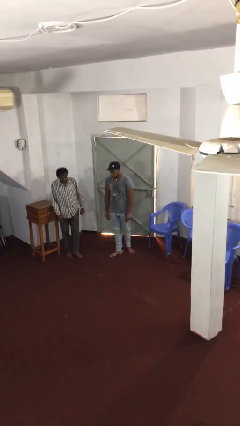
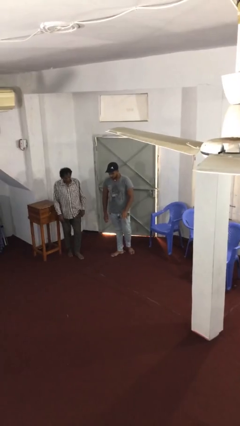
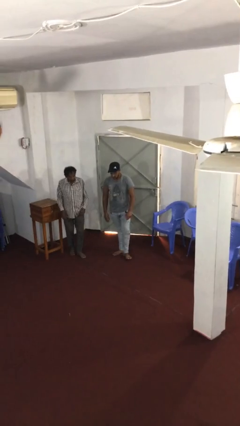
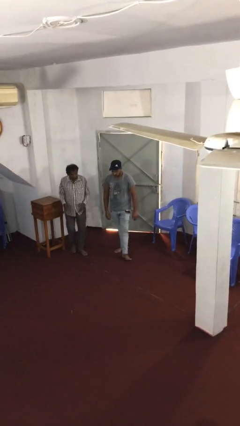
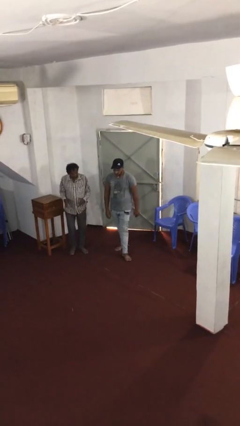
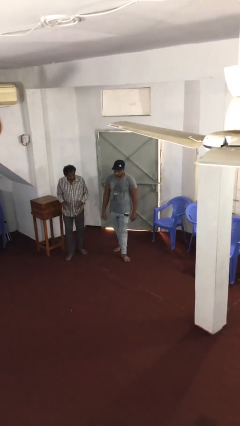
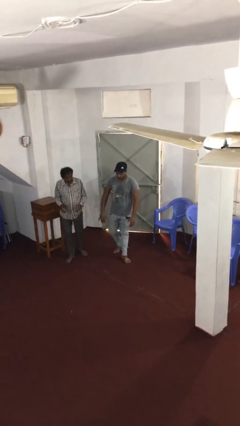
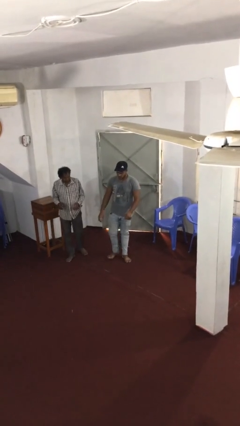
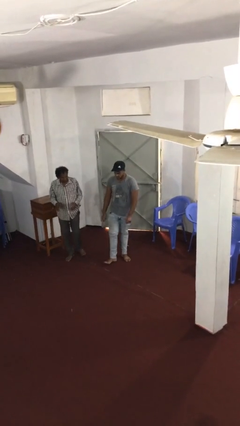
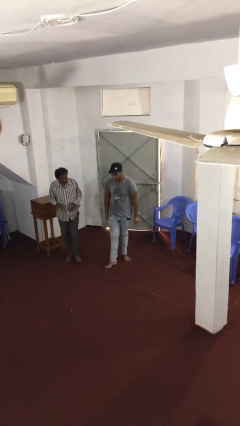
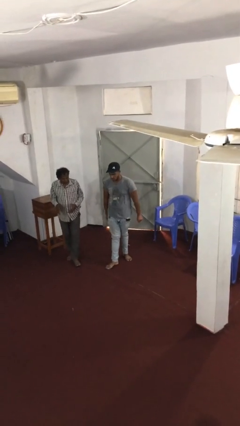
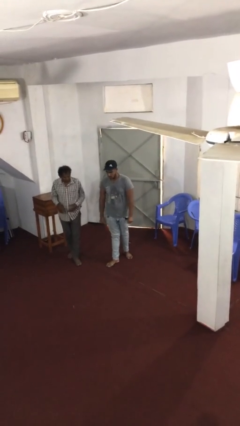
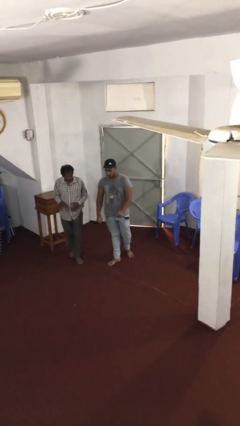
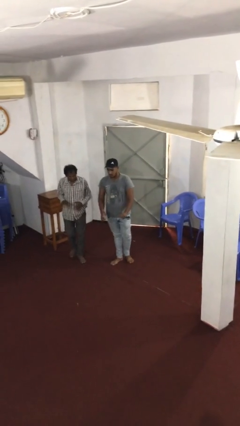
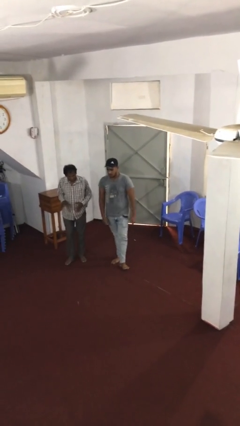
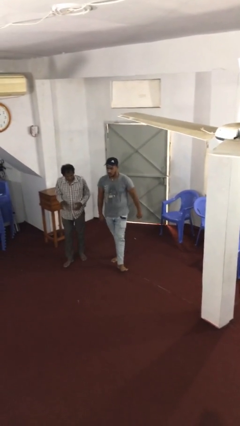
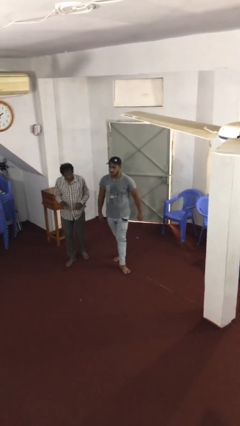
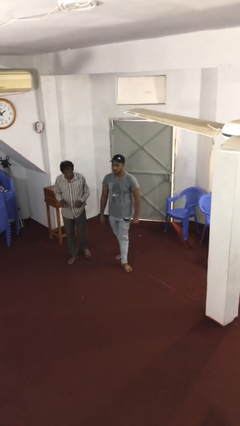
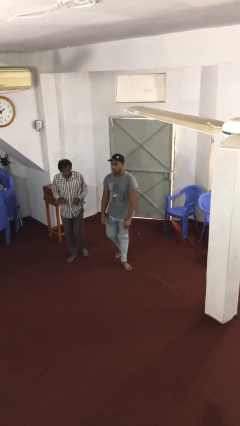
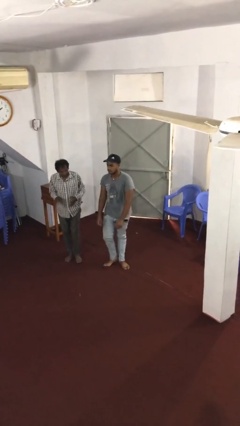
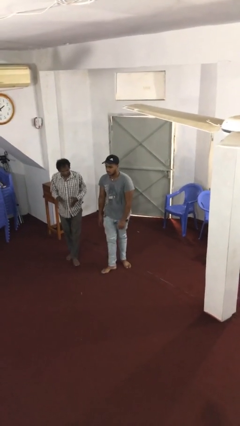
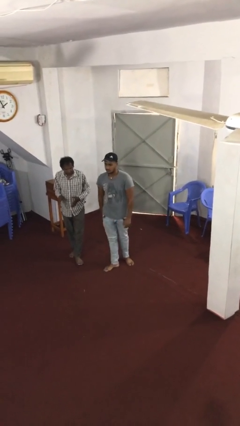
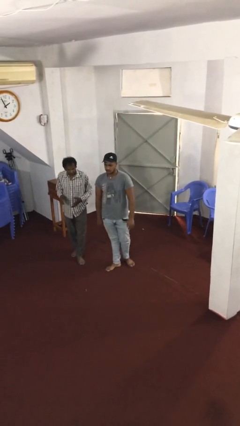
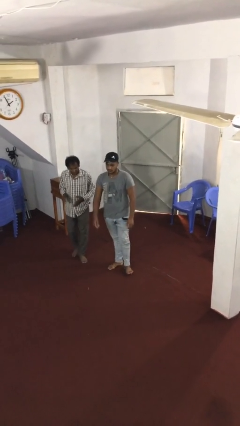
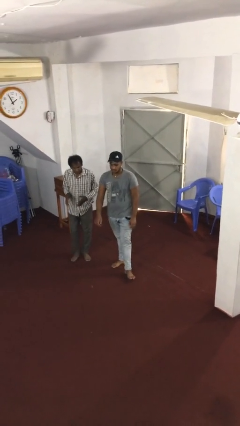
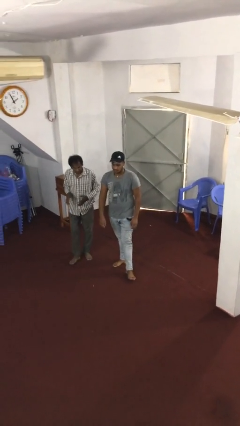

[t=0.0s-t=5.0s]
person talks to person

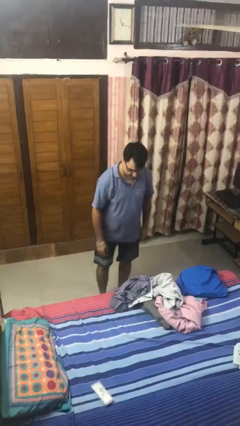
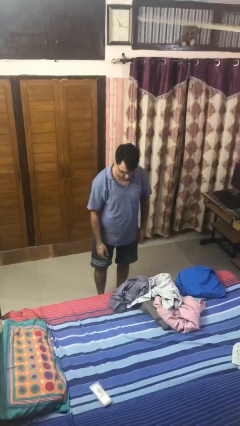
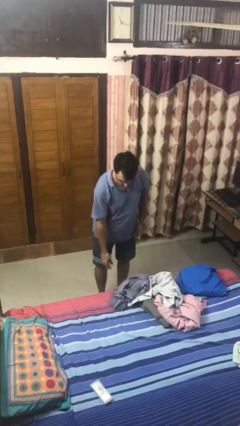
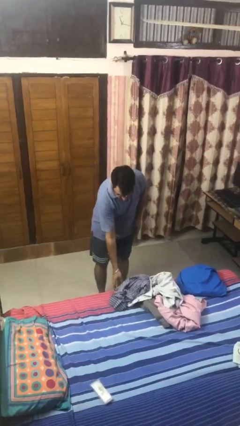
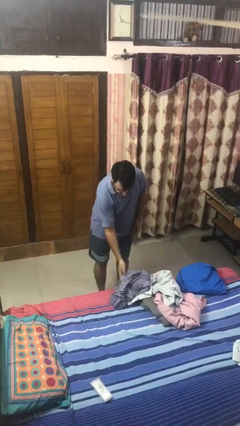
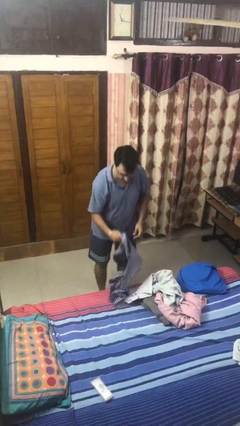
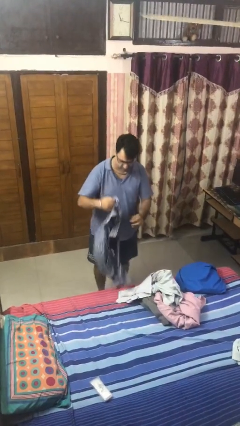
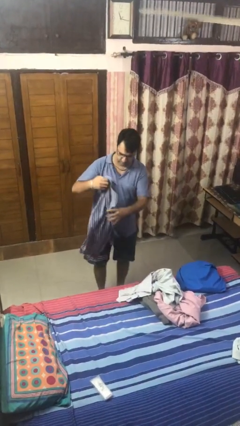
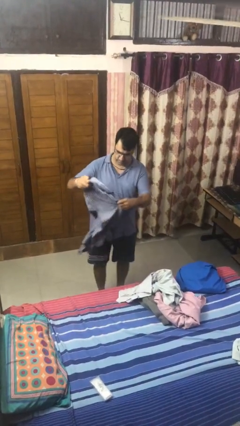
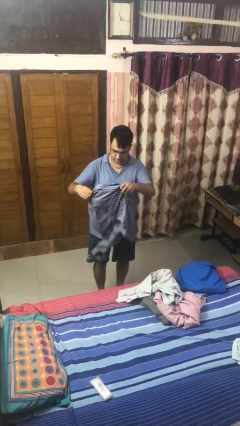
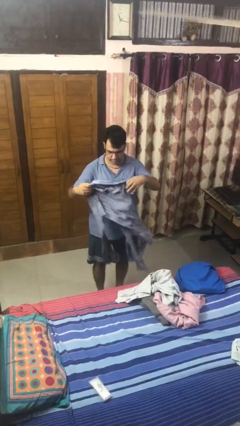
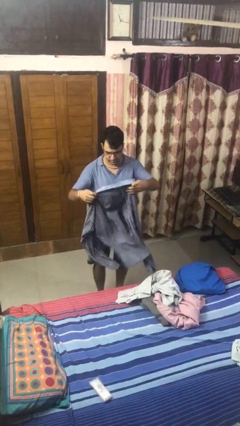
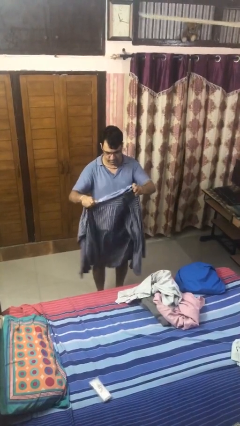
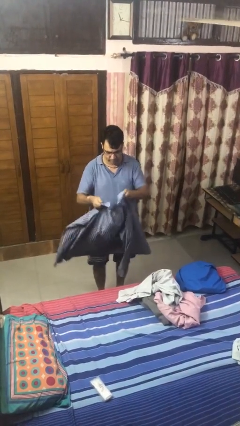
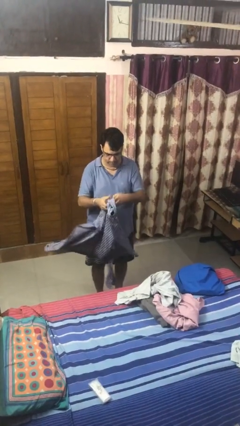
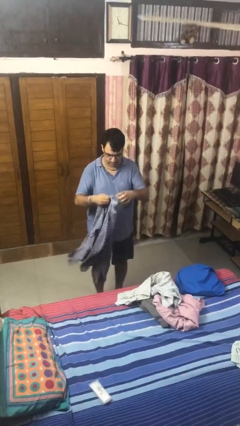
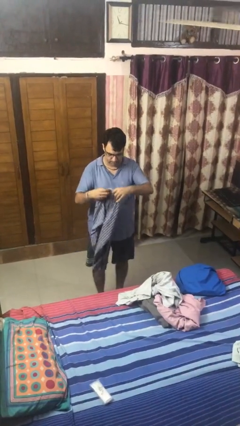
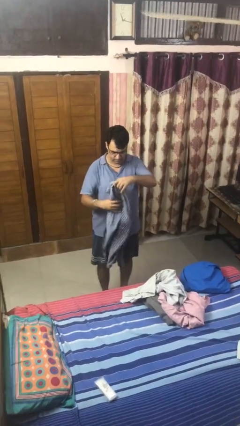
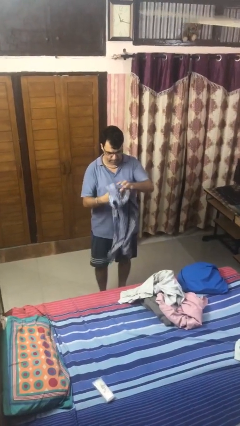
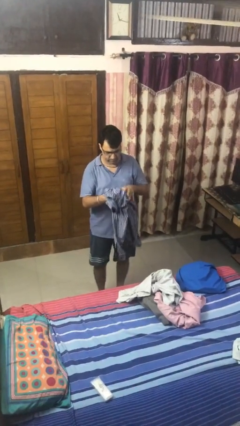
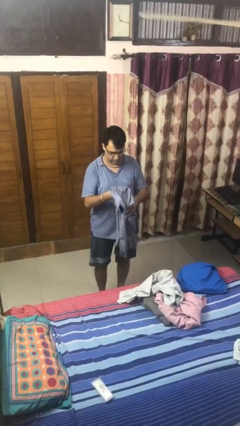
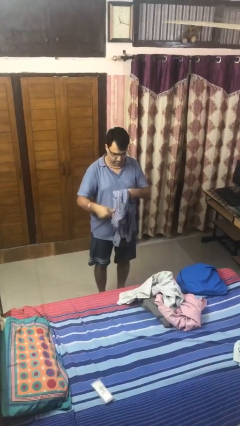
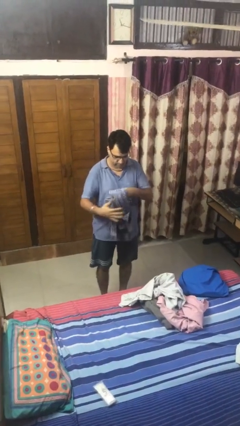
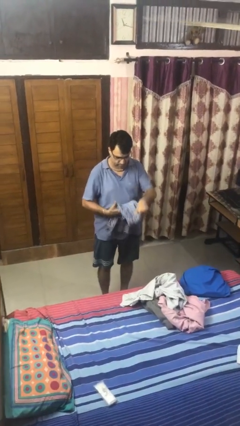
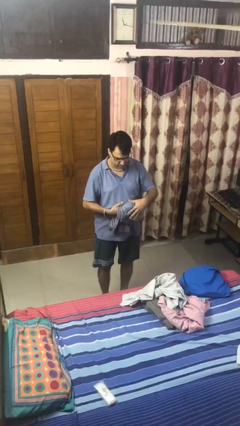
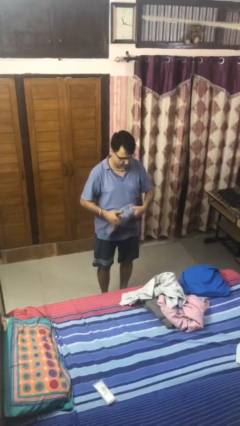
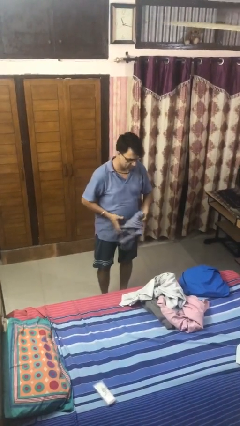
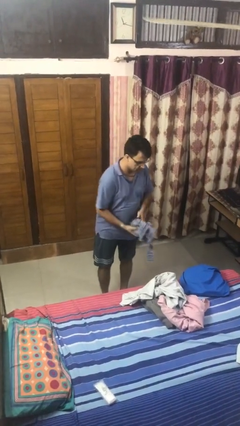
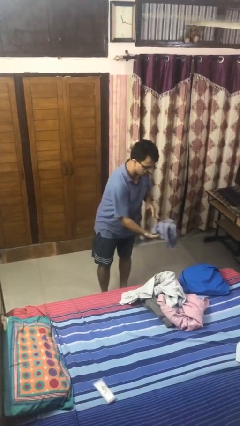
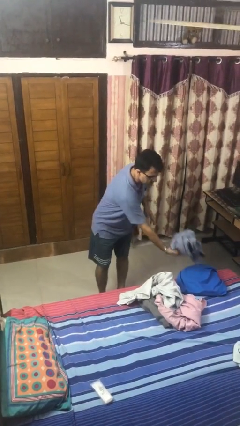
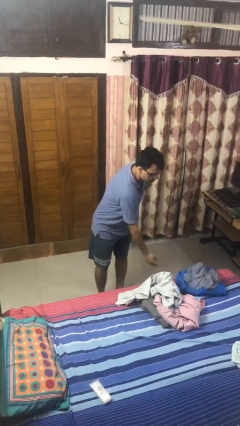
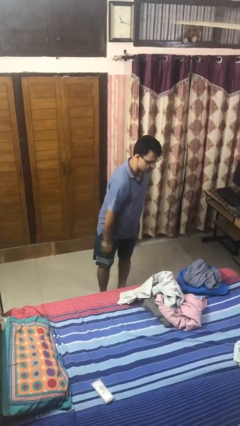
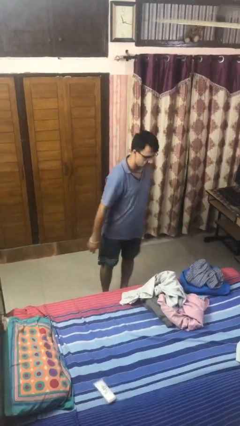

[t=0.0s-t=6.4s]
person folds shirt

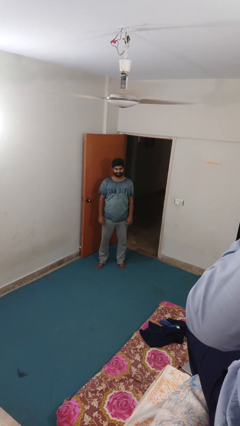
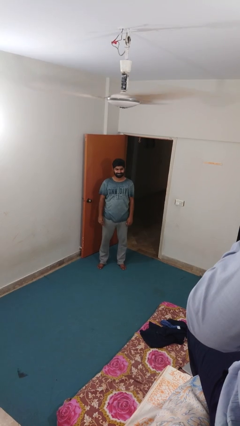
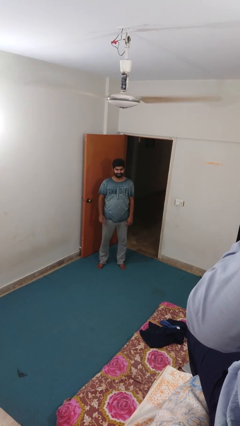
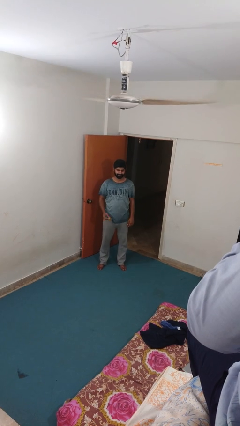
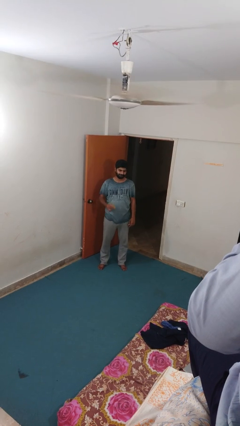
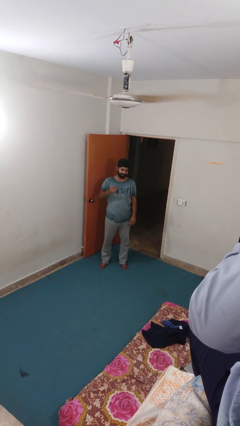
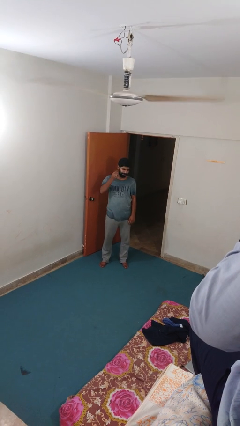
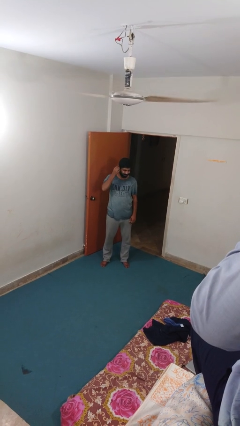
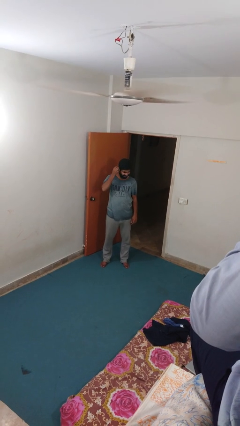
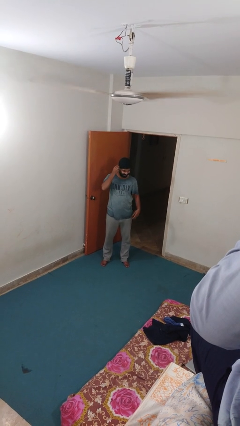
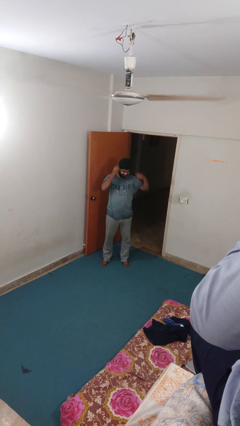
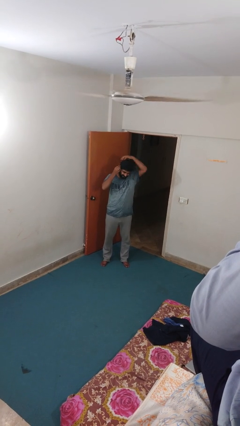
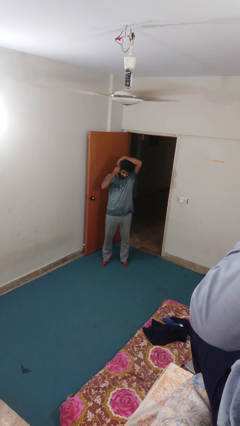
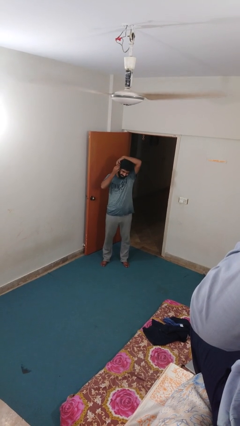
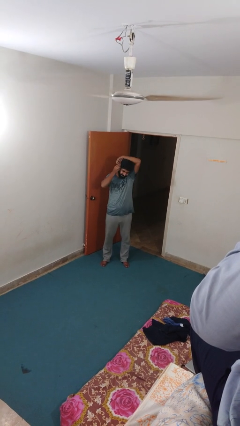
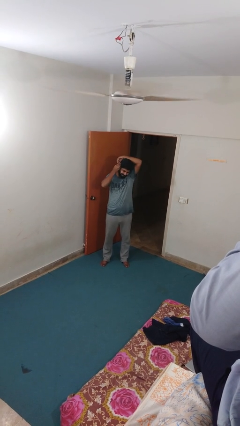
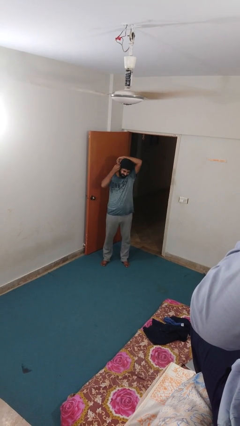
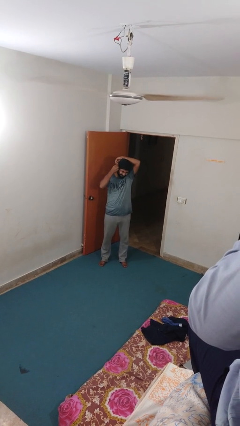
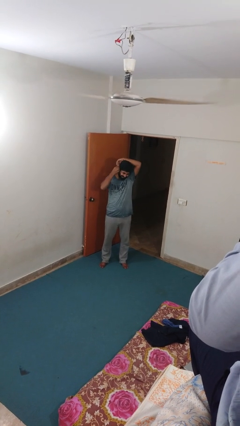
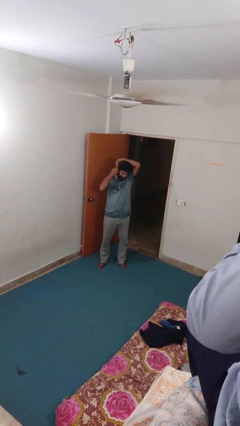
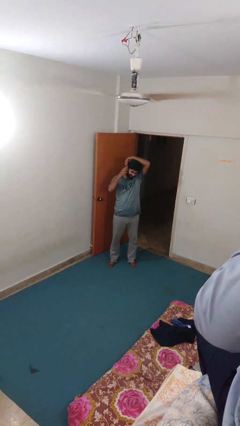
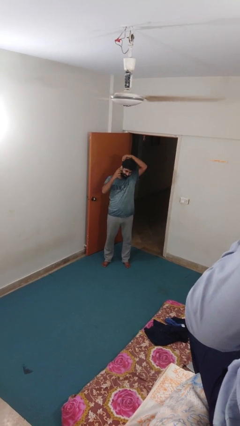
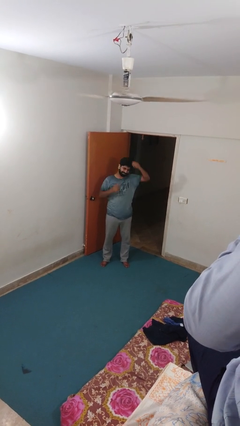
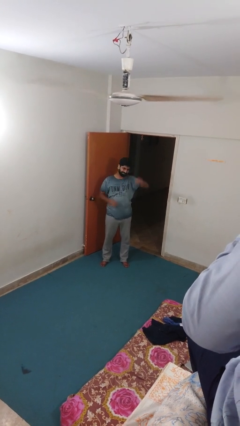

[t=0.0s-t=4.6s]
person puts on earrings

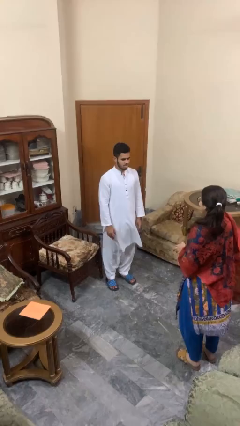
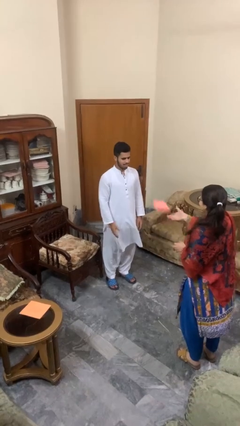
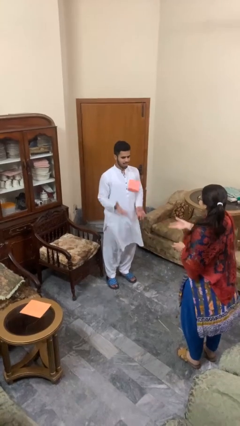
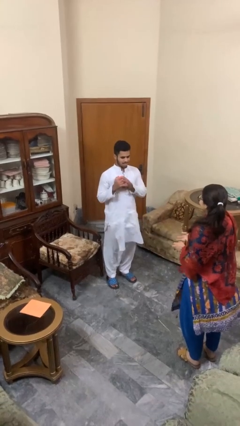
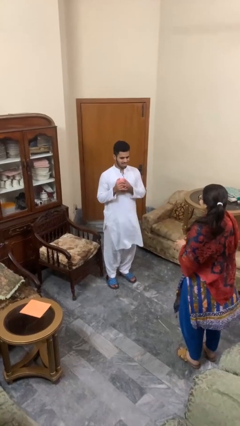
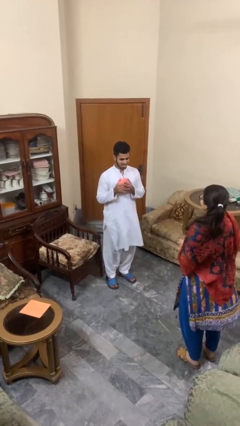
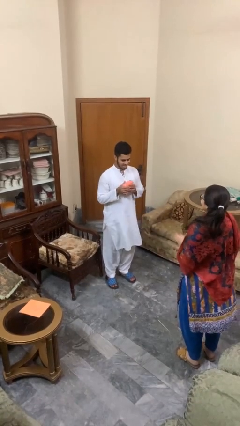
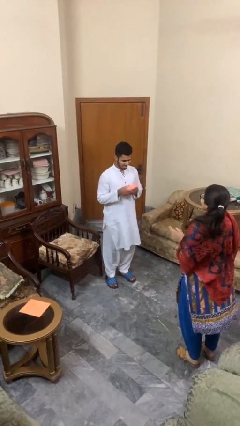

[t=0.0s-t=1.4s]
person catches object from person

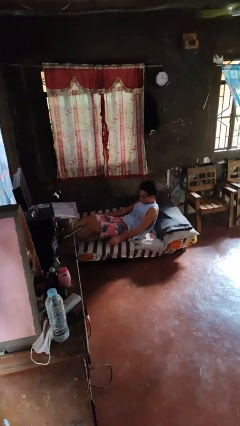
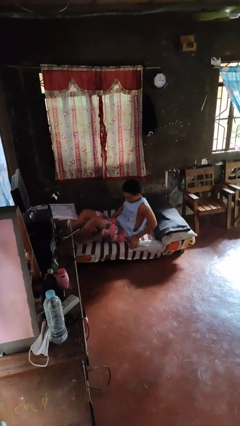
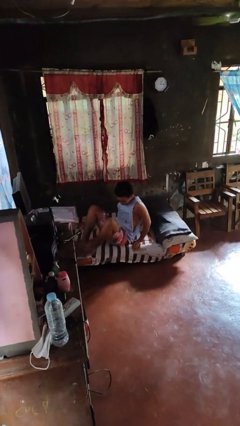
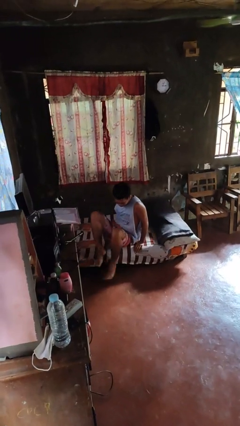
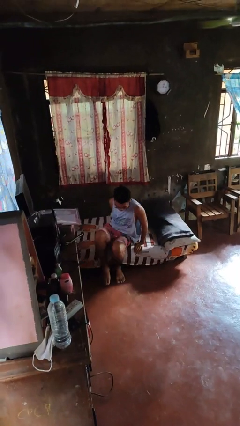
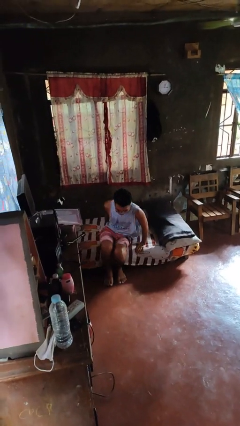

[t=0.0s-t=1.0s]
person stands up
